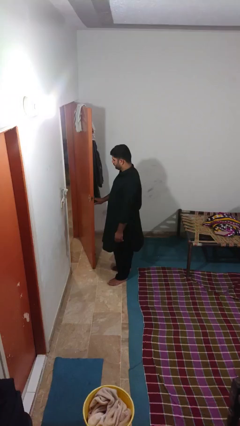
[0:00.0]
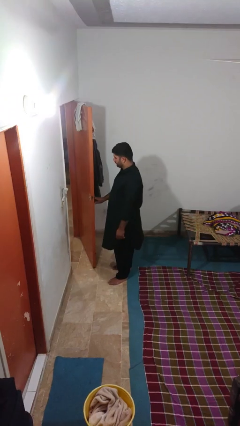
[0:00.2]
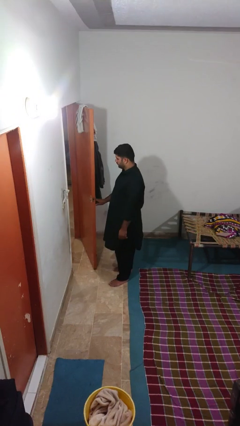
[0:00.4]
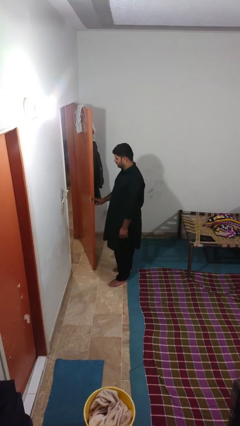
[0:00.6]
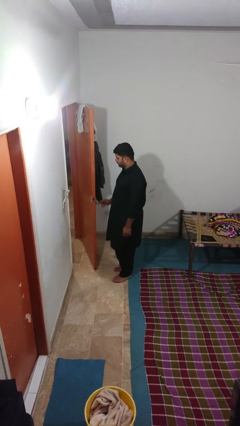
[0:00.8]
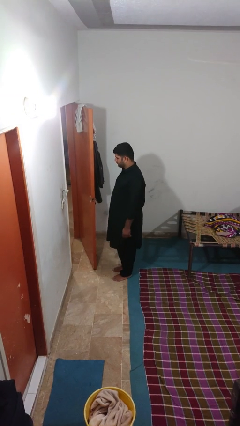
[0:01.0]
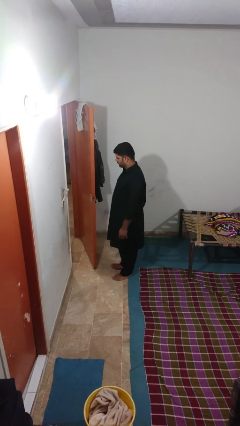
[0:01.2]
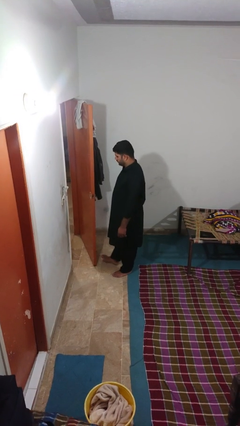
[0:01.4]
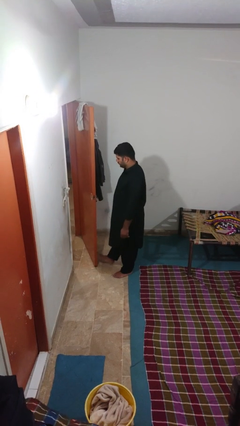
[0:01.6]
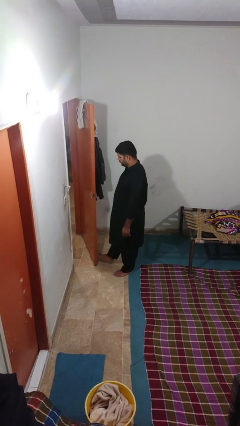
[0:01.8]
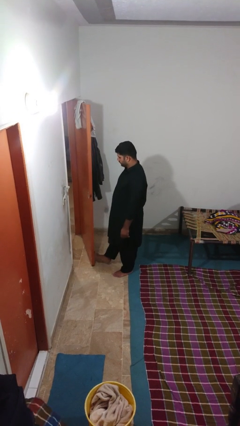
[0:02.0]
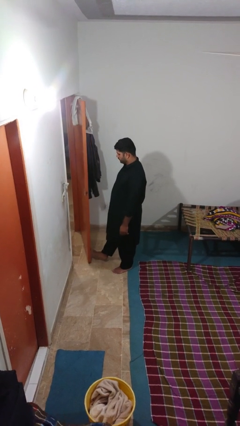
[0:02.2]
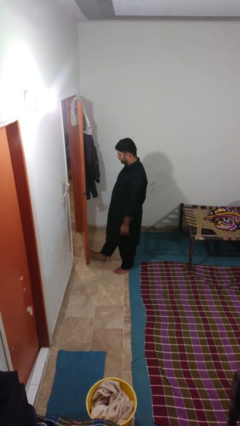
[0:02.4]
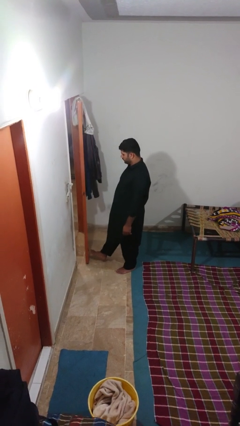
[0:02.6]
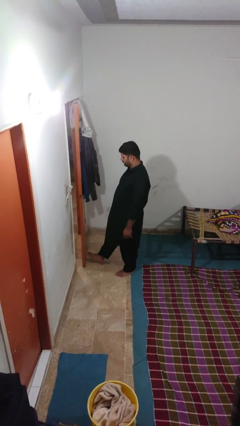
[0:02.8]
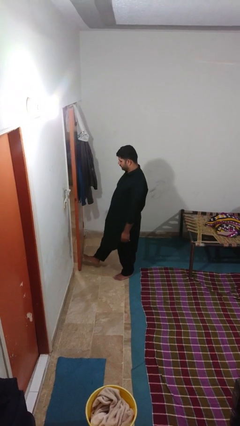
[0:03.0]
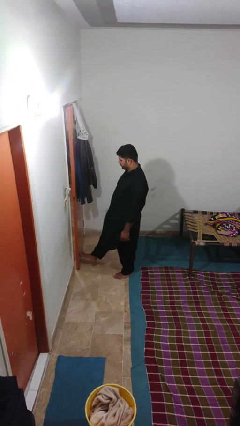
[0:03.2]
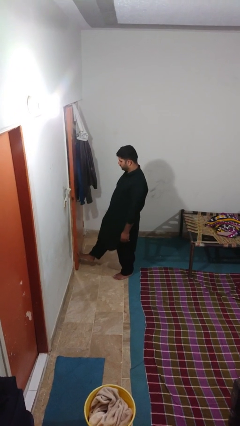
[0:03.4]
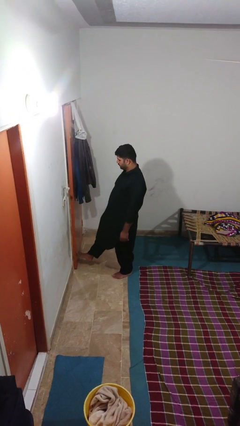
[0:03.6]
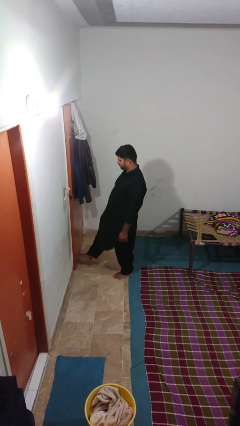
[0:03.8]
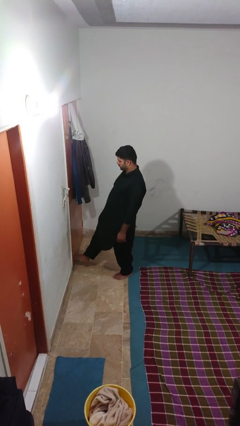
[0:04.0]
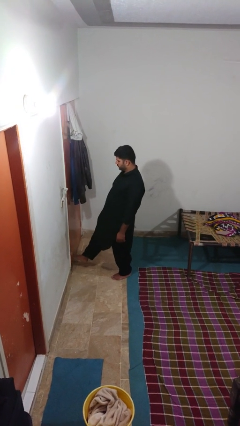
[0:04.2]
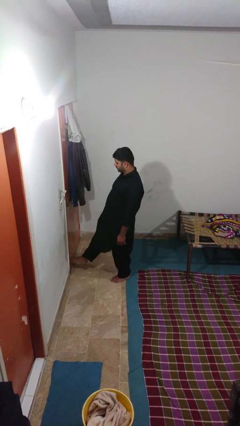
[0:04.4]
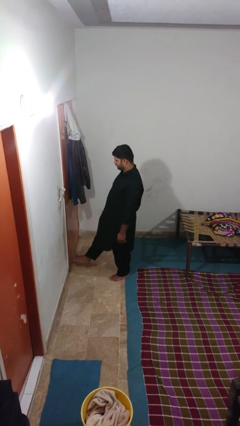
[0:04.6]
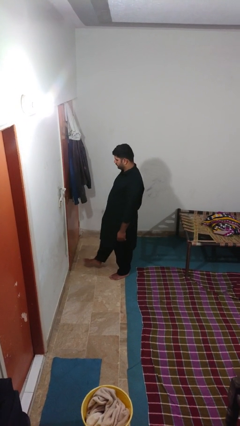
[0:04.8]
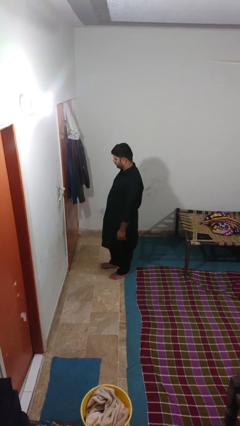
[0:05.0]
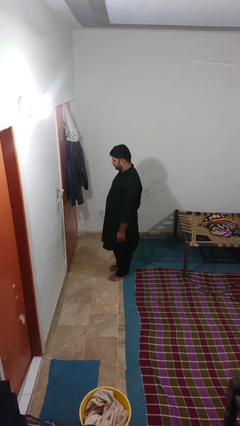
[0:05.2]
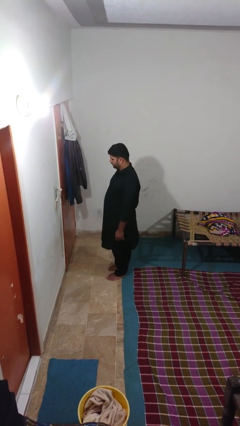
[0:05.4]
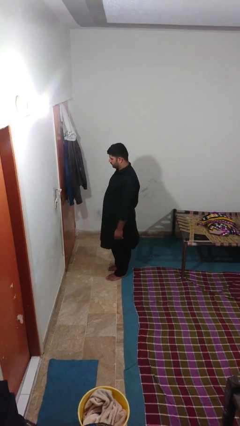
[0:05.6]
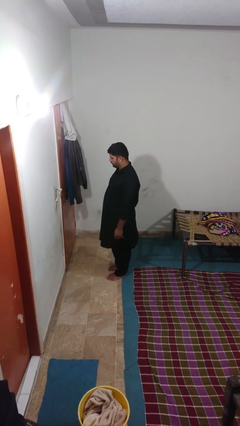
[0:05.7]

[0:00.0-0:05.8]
person closes door with foot

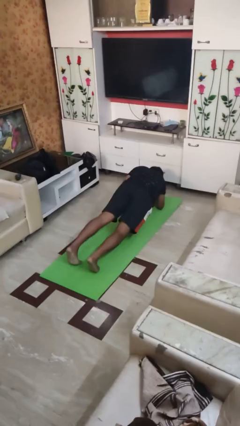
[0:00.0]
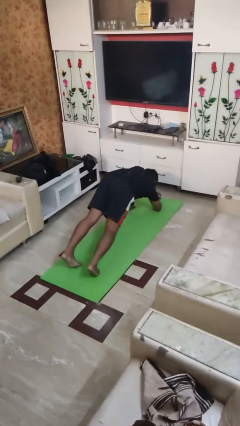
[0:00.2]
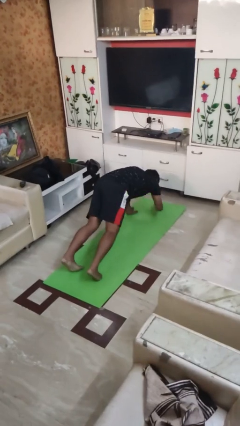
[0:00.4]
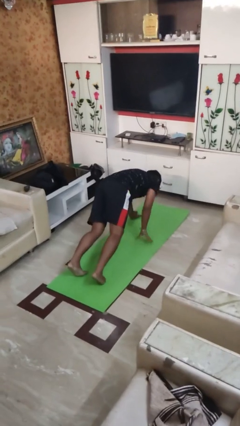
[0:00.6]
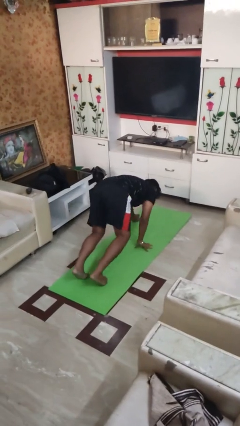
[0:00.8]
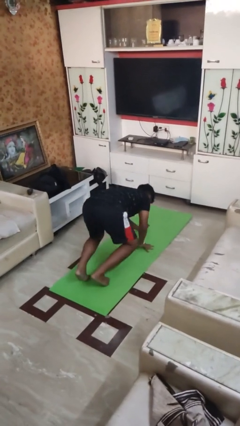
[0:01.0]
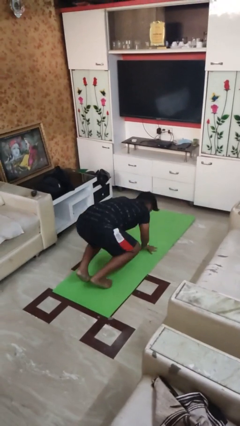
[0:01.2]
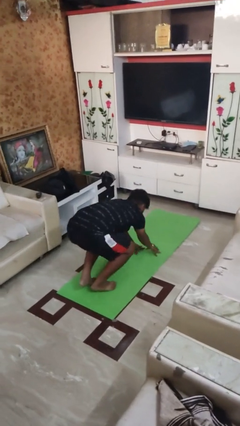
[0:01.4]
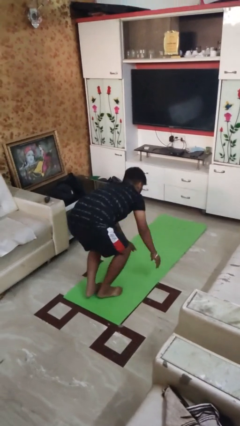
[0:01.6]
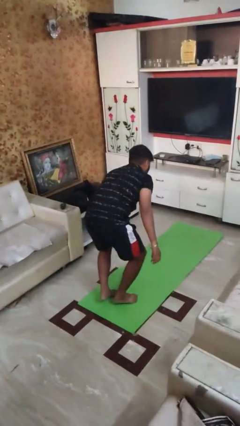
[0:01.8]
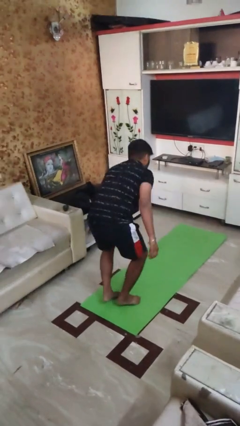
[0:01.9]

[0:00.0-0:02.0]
person stands up from floor

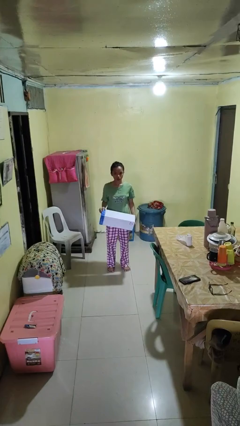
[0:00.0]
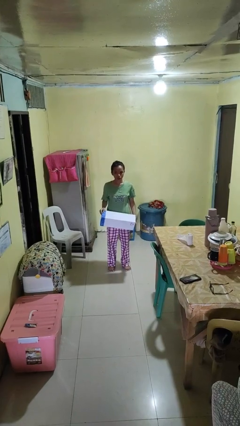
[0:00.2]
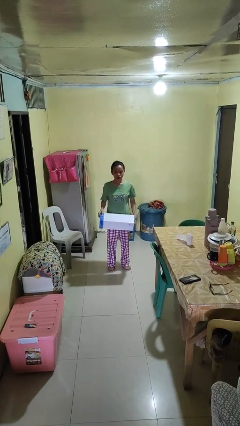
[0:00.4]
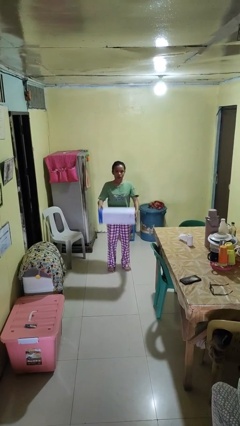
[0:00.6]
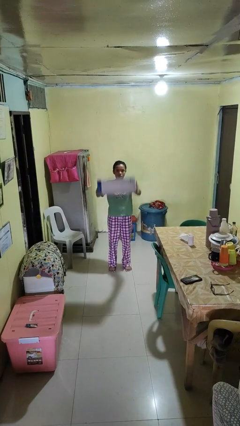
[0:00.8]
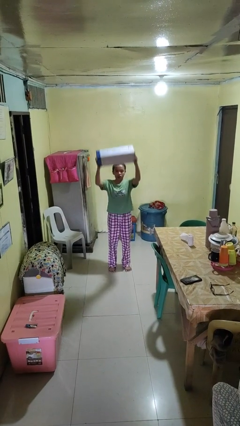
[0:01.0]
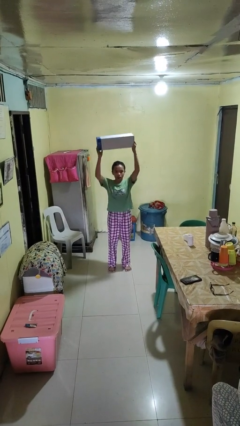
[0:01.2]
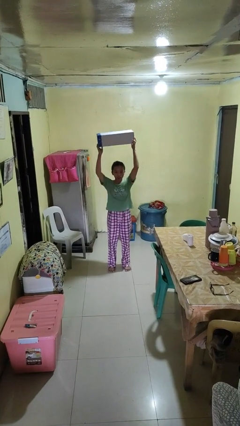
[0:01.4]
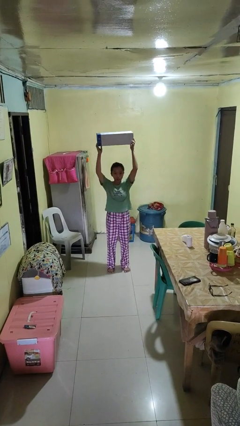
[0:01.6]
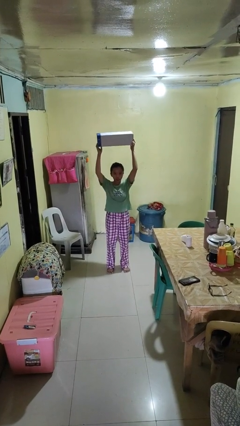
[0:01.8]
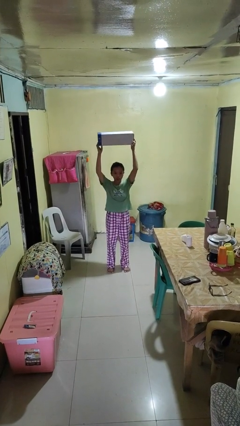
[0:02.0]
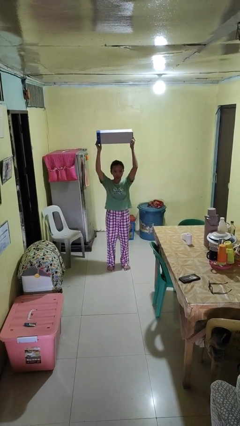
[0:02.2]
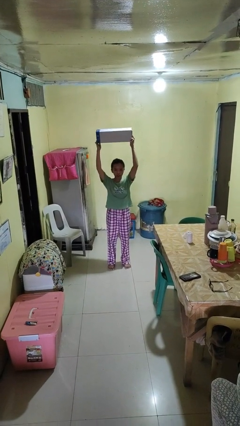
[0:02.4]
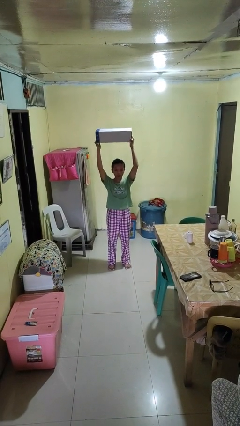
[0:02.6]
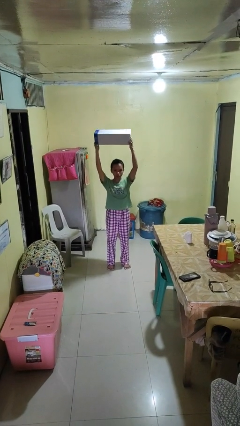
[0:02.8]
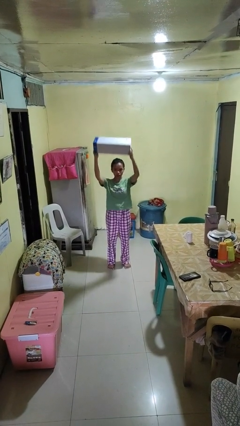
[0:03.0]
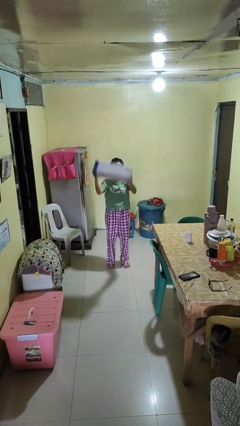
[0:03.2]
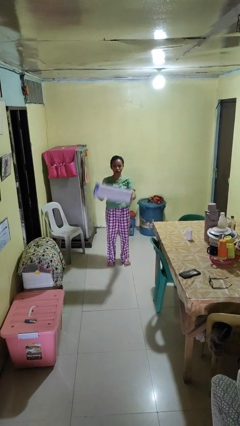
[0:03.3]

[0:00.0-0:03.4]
person holds object above head

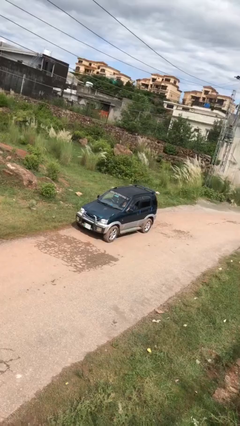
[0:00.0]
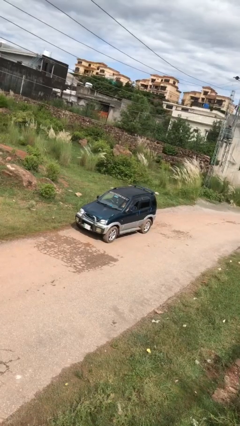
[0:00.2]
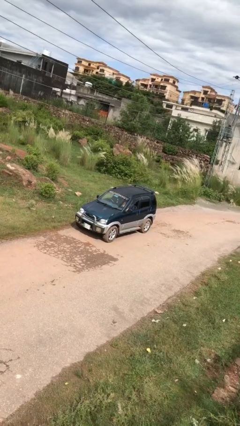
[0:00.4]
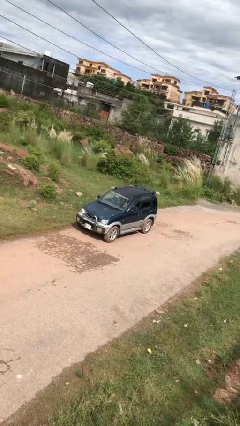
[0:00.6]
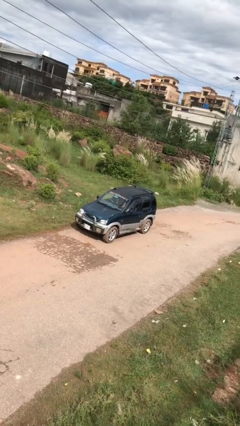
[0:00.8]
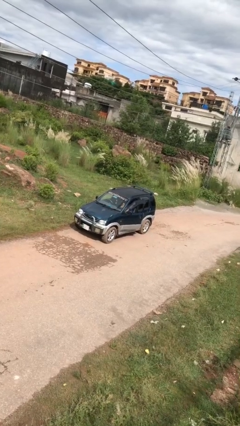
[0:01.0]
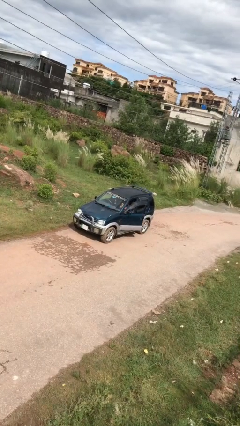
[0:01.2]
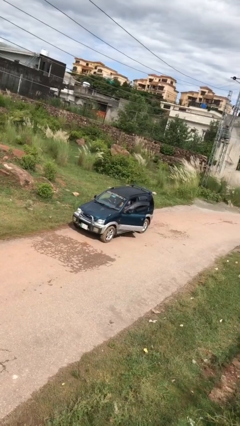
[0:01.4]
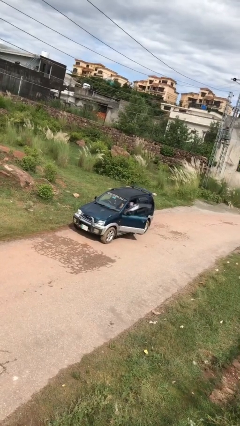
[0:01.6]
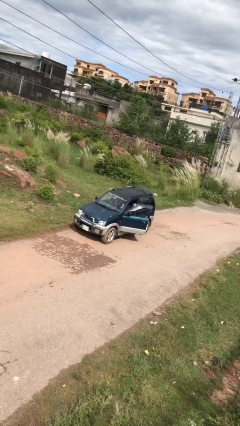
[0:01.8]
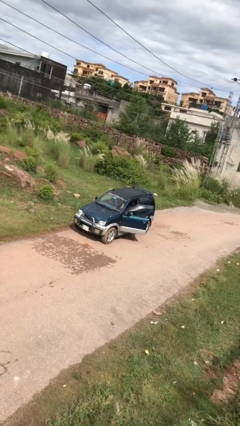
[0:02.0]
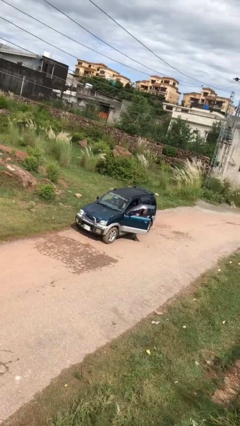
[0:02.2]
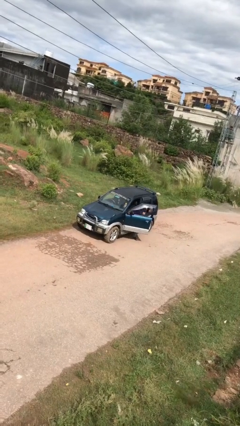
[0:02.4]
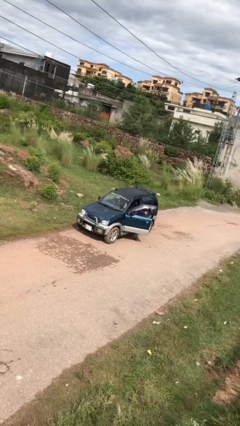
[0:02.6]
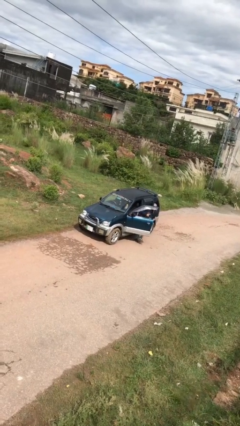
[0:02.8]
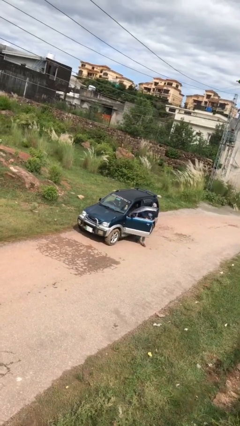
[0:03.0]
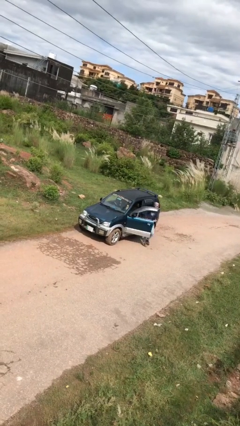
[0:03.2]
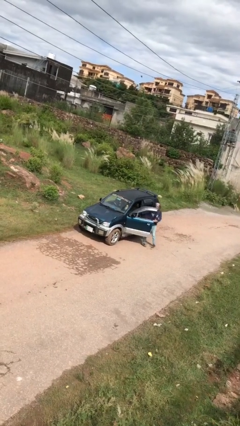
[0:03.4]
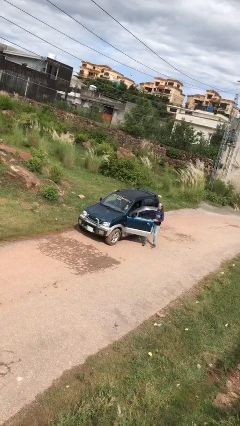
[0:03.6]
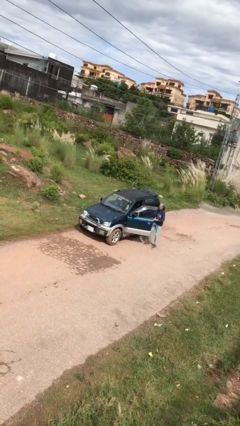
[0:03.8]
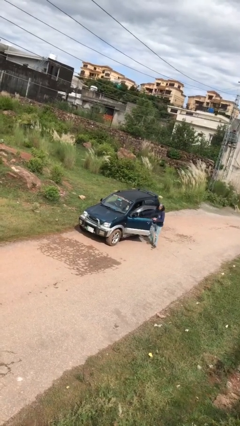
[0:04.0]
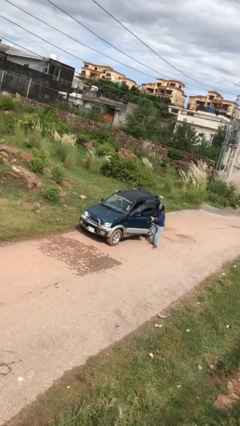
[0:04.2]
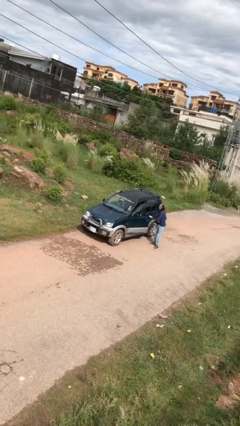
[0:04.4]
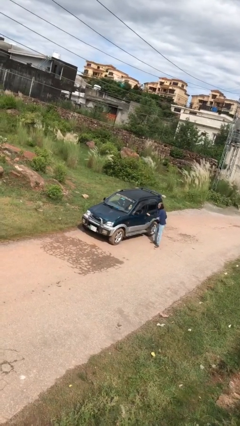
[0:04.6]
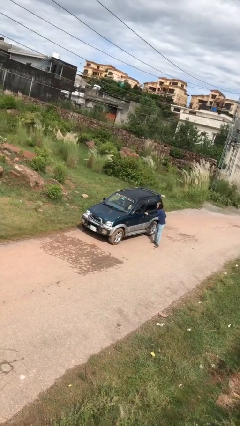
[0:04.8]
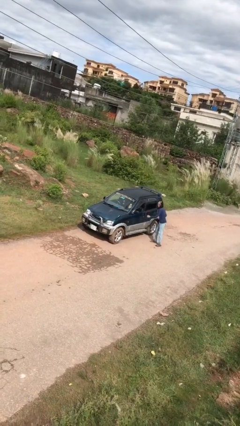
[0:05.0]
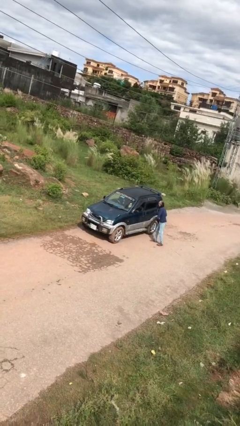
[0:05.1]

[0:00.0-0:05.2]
car drops off person

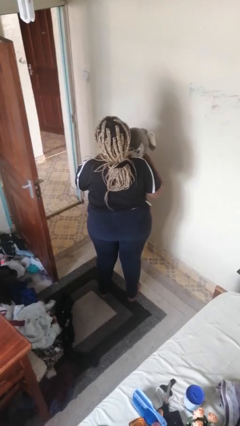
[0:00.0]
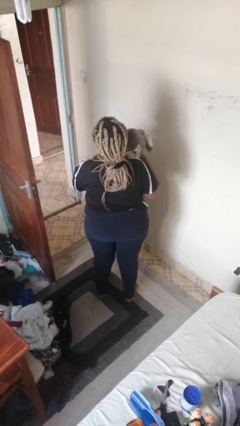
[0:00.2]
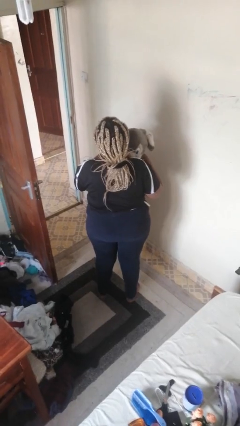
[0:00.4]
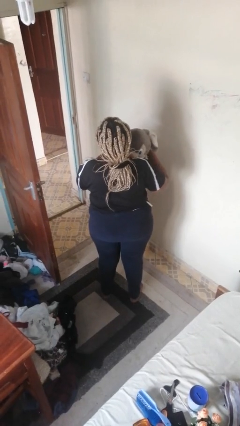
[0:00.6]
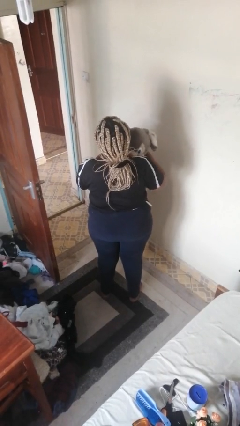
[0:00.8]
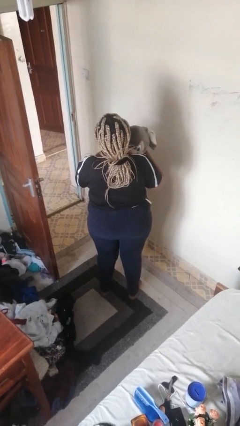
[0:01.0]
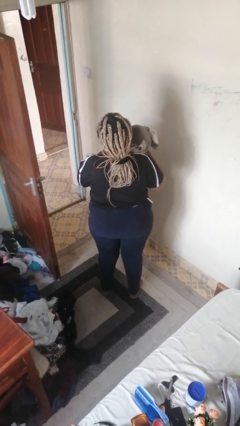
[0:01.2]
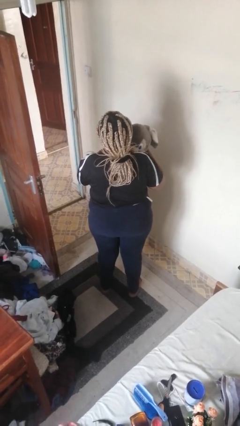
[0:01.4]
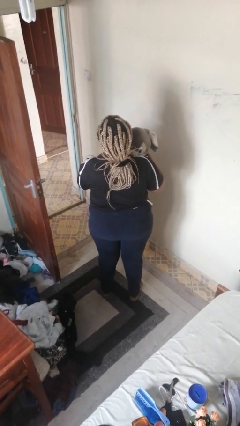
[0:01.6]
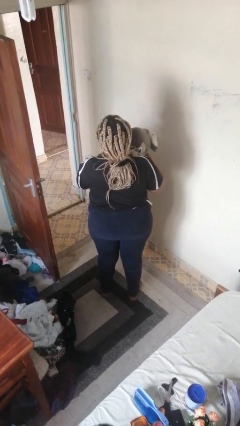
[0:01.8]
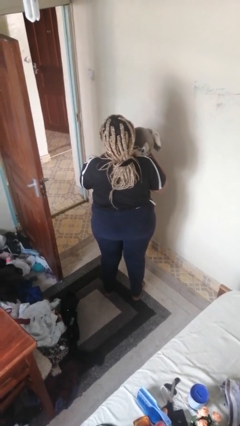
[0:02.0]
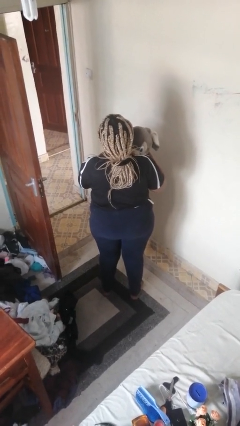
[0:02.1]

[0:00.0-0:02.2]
person hugs stuffed animal
